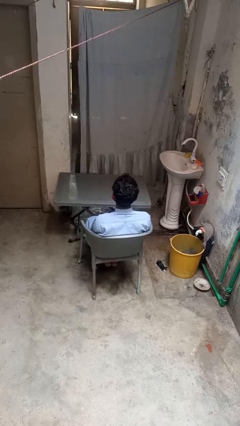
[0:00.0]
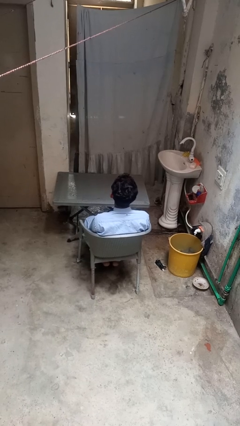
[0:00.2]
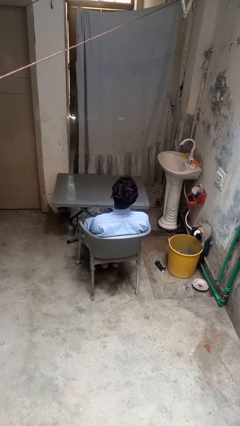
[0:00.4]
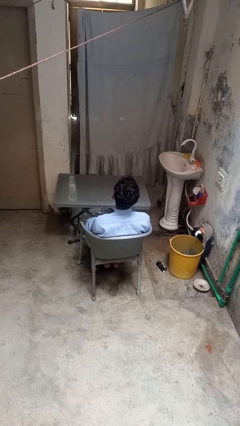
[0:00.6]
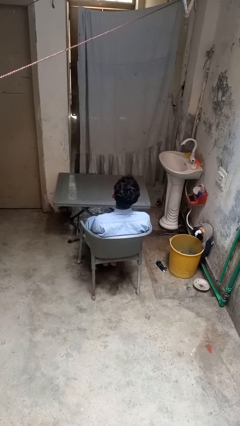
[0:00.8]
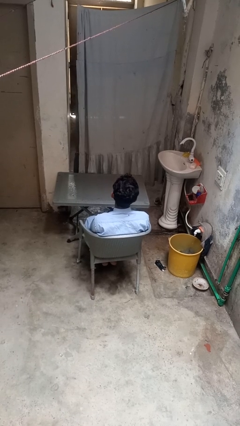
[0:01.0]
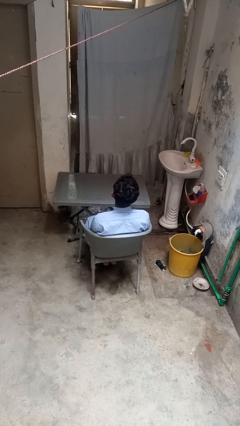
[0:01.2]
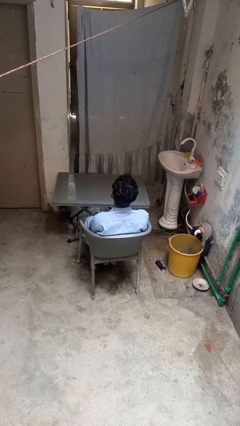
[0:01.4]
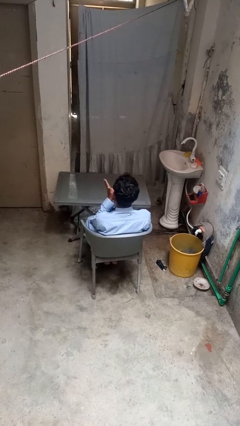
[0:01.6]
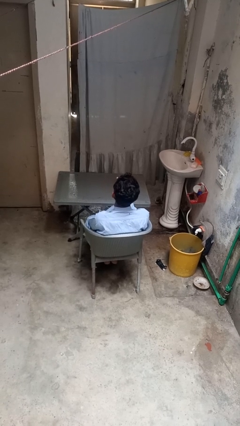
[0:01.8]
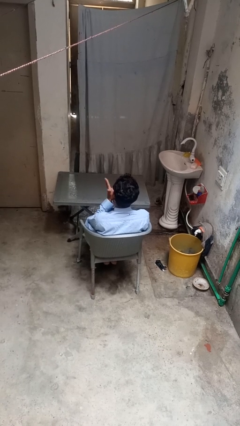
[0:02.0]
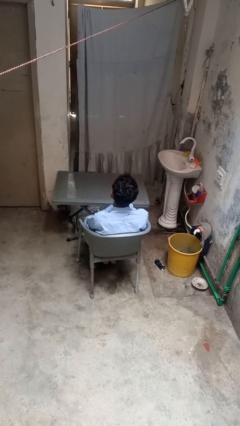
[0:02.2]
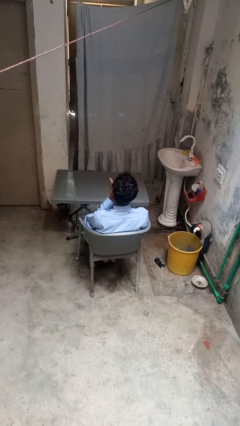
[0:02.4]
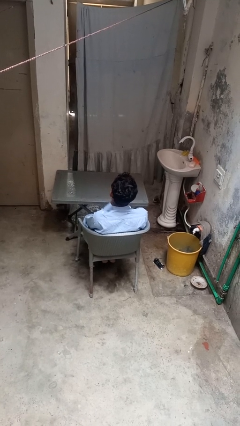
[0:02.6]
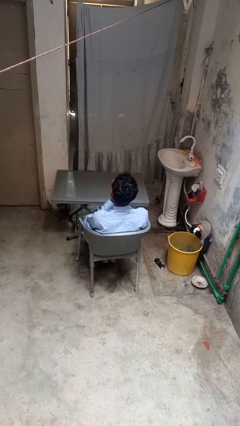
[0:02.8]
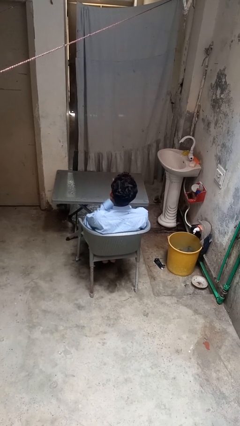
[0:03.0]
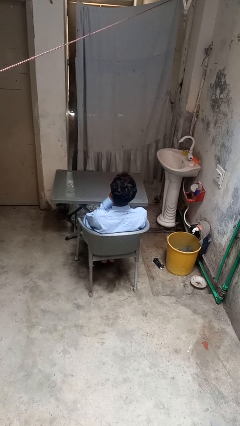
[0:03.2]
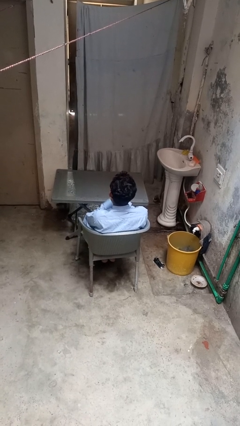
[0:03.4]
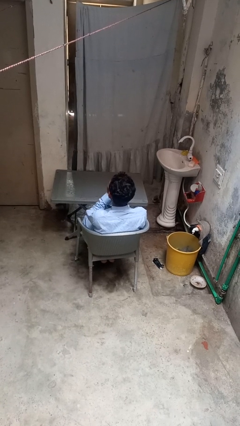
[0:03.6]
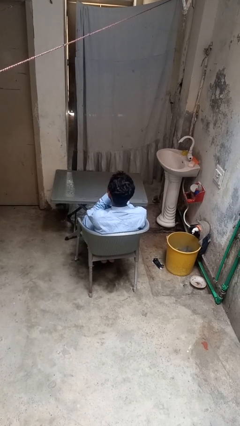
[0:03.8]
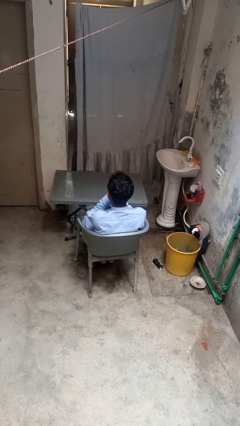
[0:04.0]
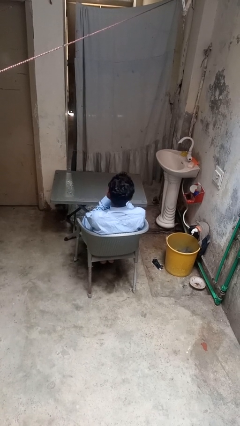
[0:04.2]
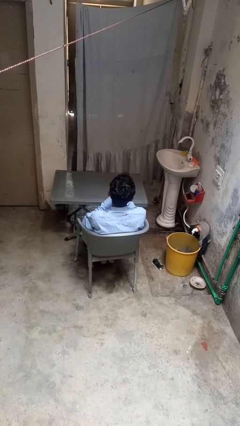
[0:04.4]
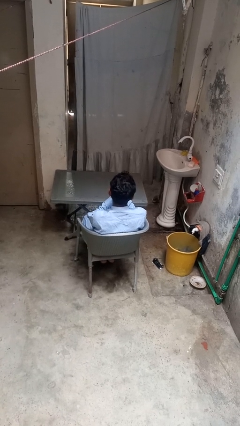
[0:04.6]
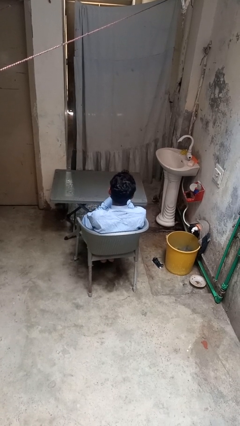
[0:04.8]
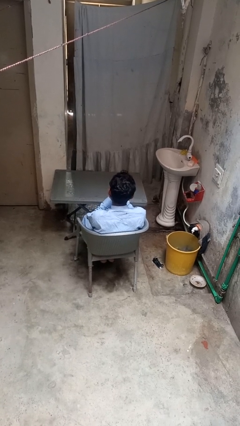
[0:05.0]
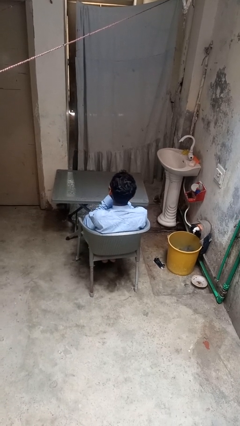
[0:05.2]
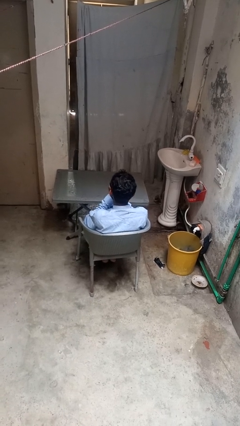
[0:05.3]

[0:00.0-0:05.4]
person blows into hands

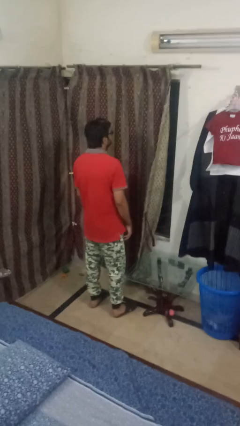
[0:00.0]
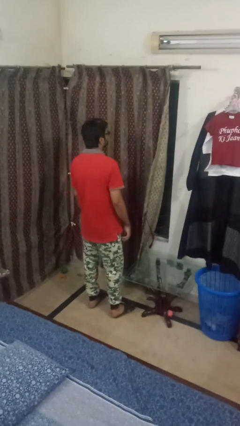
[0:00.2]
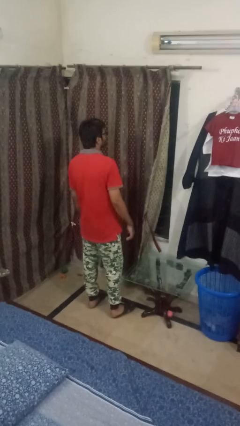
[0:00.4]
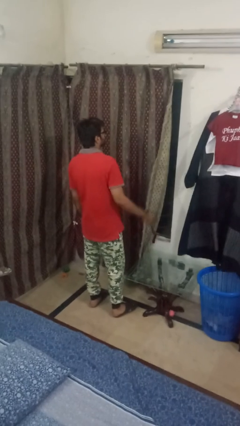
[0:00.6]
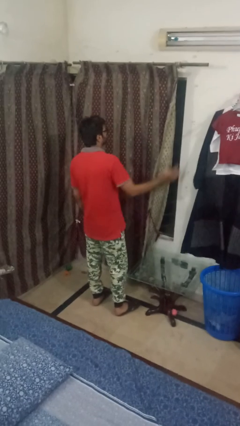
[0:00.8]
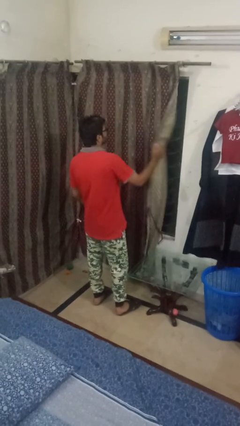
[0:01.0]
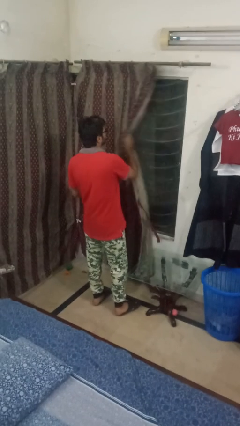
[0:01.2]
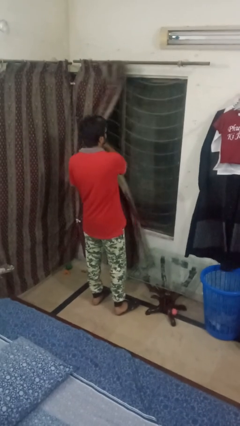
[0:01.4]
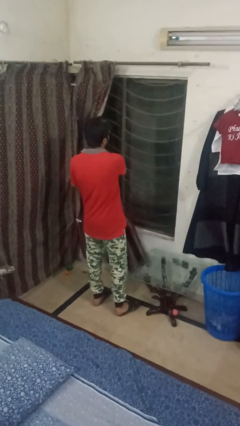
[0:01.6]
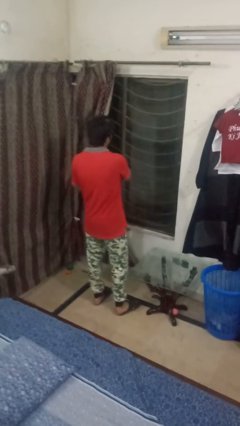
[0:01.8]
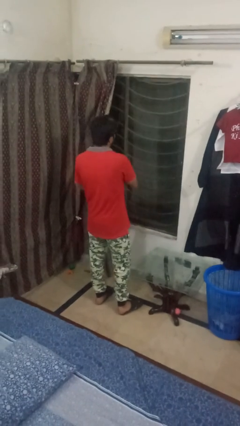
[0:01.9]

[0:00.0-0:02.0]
person opens curtains

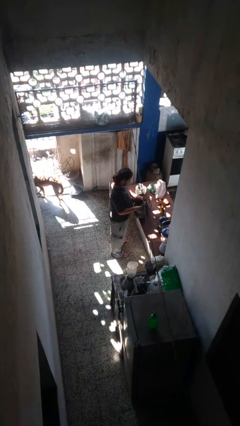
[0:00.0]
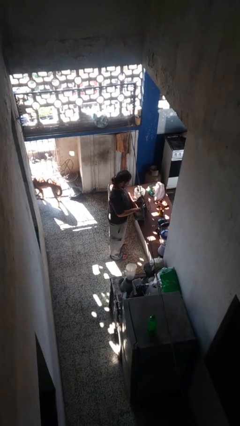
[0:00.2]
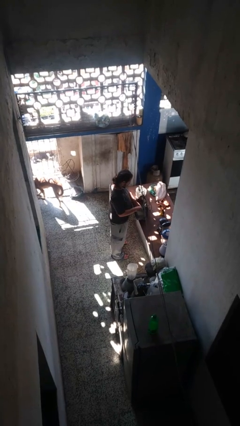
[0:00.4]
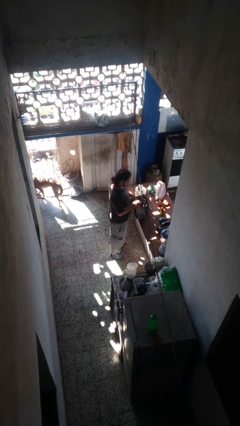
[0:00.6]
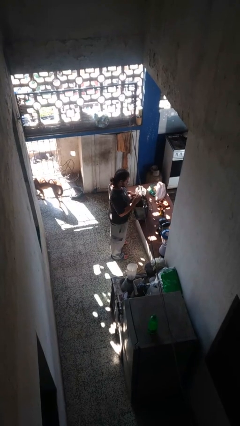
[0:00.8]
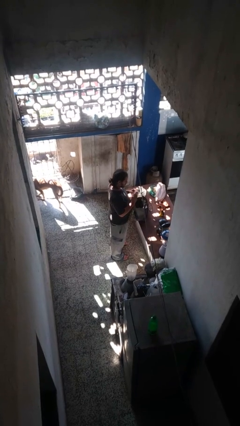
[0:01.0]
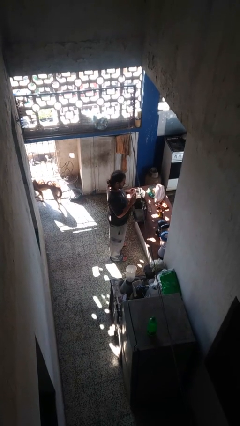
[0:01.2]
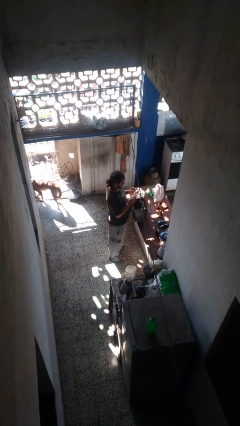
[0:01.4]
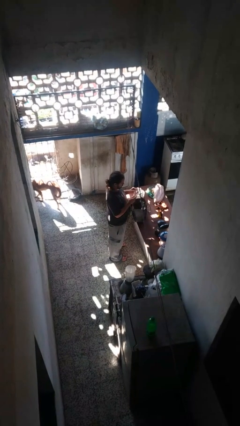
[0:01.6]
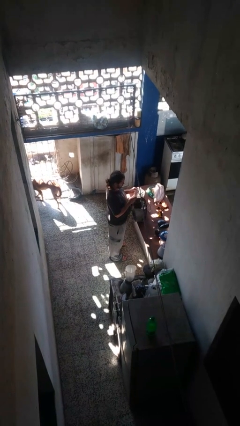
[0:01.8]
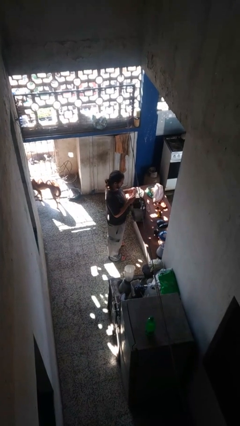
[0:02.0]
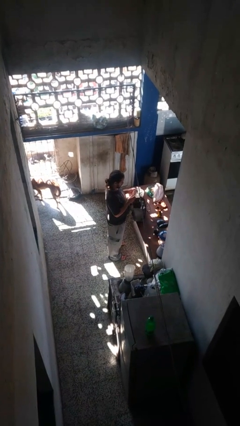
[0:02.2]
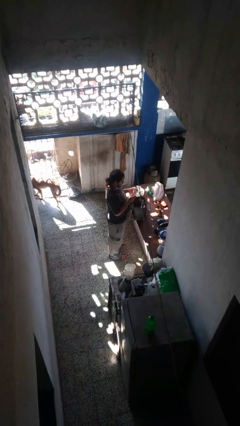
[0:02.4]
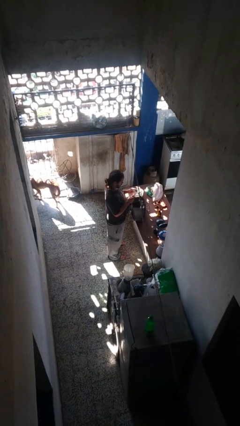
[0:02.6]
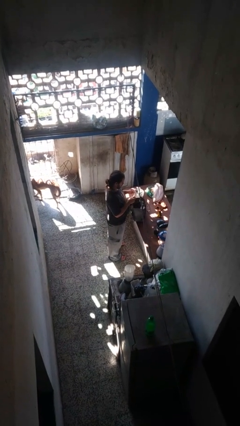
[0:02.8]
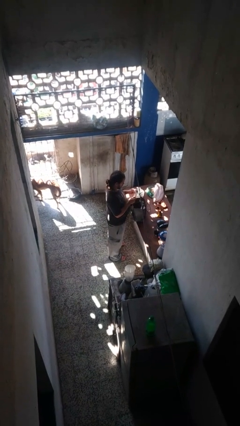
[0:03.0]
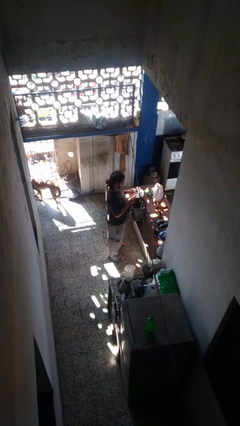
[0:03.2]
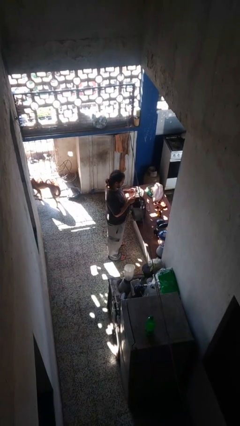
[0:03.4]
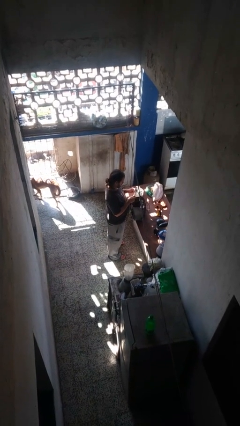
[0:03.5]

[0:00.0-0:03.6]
person takes object from purse

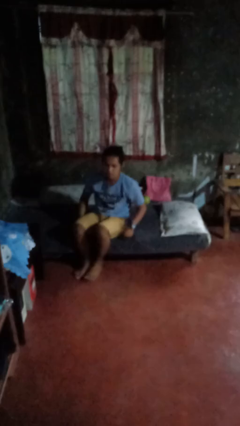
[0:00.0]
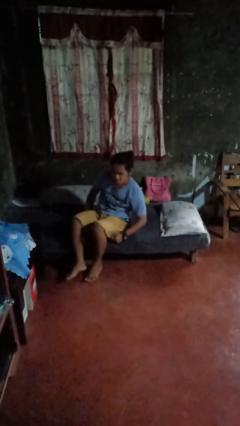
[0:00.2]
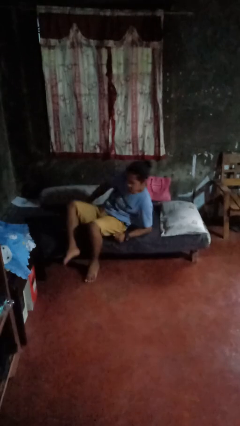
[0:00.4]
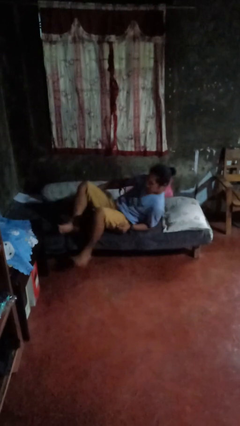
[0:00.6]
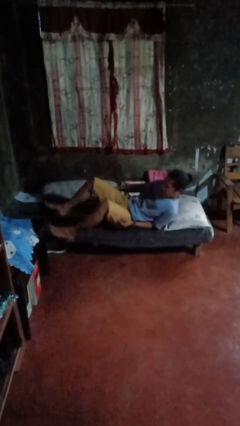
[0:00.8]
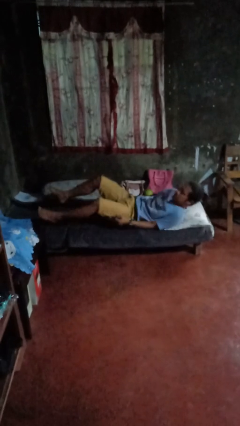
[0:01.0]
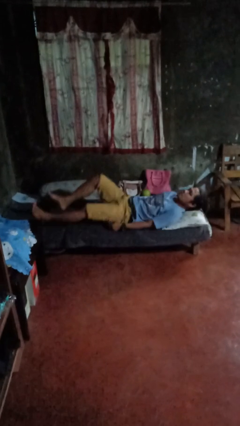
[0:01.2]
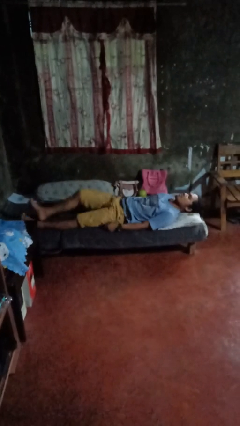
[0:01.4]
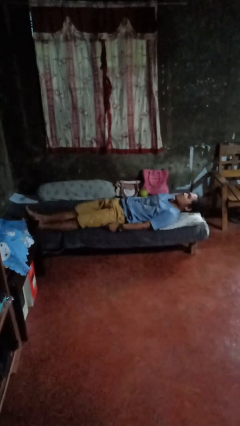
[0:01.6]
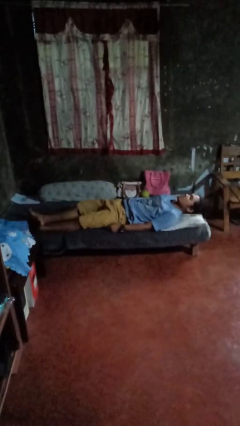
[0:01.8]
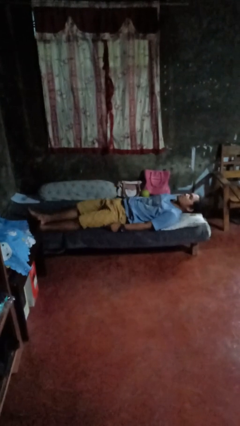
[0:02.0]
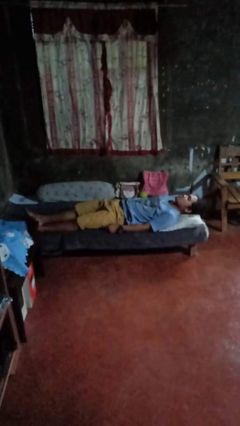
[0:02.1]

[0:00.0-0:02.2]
person lies down on bed

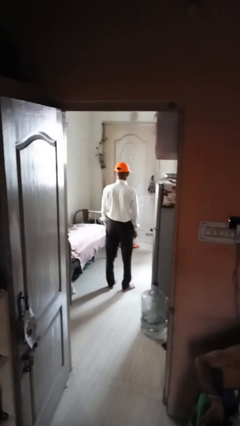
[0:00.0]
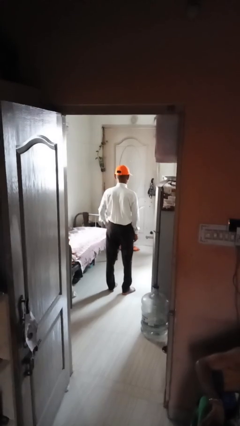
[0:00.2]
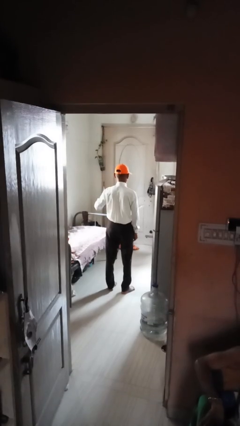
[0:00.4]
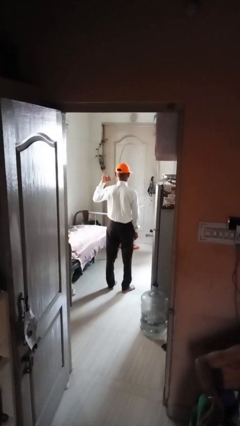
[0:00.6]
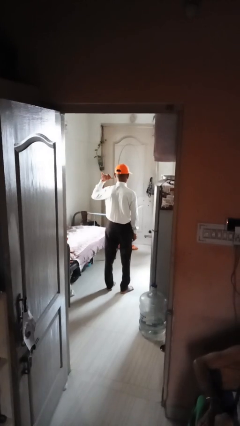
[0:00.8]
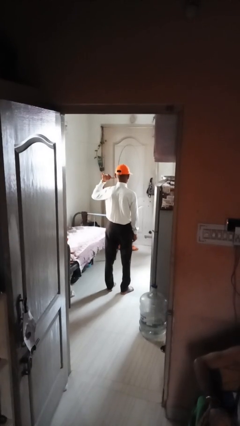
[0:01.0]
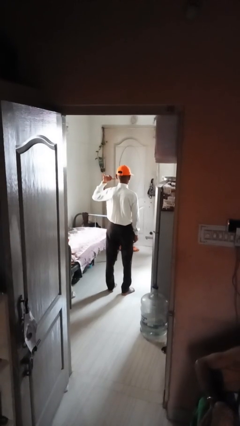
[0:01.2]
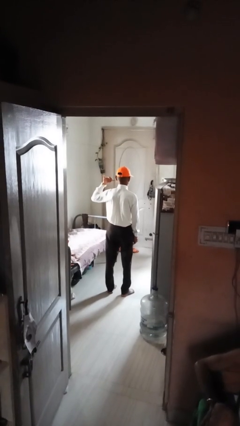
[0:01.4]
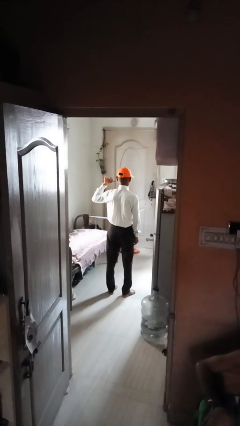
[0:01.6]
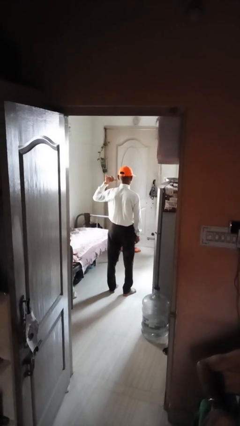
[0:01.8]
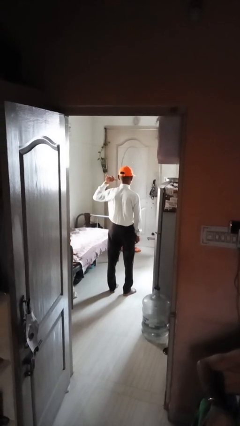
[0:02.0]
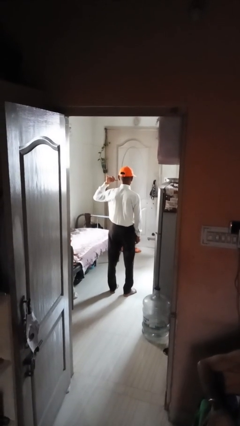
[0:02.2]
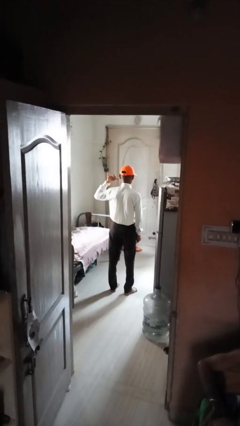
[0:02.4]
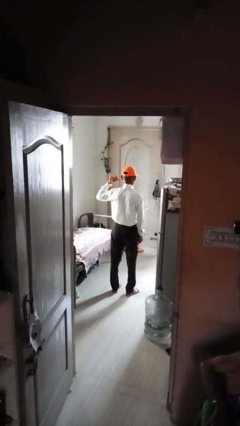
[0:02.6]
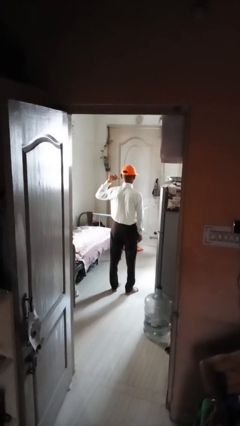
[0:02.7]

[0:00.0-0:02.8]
person gestures call me

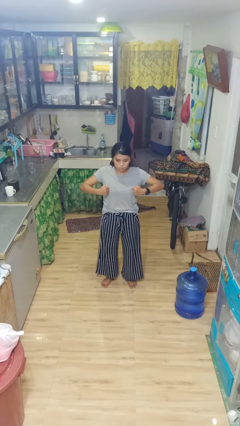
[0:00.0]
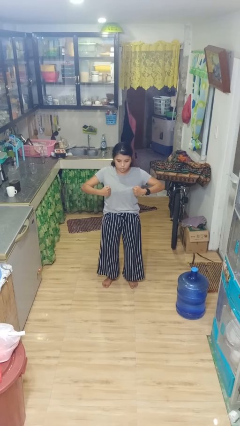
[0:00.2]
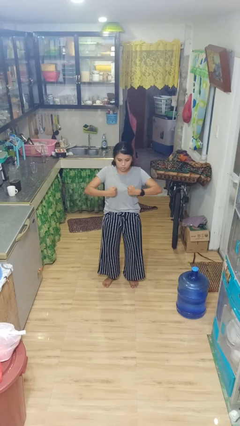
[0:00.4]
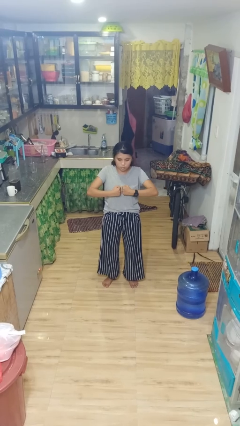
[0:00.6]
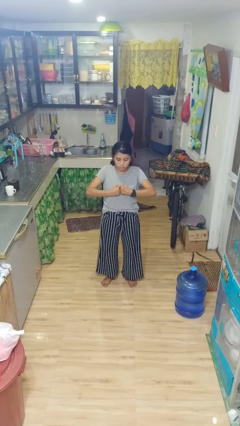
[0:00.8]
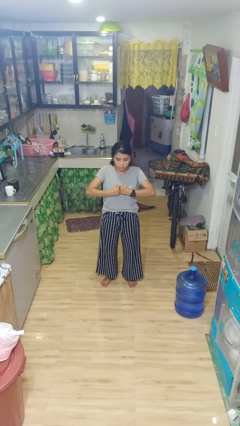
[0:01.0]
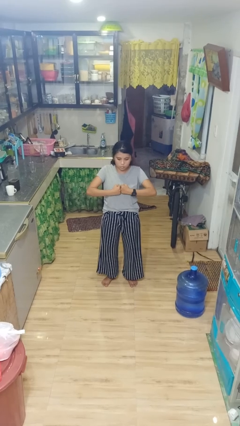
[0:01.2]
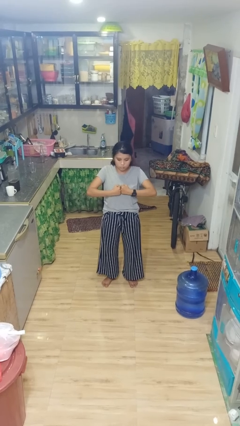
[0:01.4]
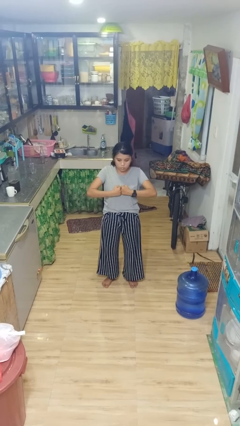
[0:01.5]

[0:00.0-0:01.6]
person gestures zoom out
